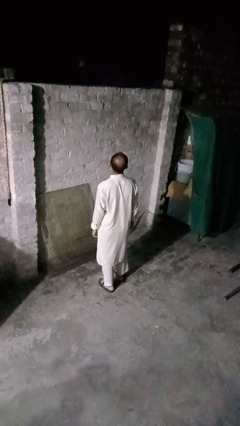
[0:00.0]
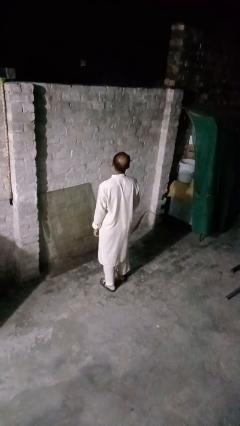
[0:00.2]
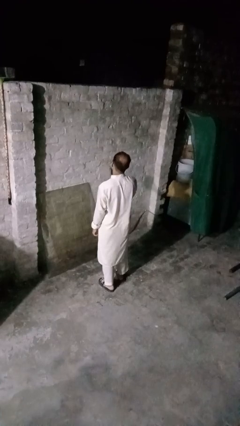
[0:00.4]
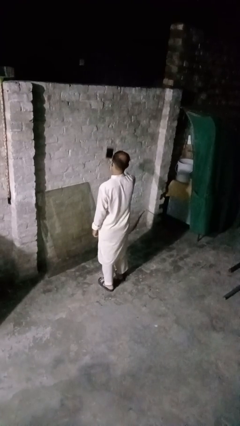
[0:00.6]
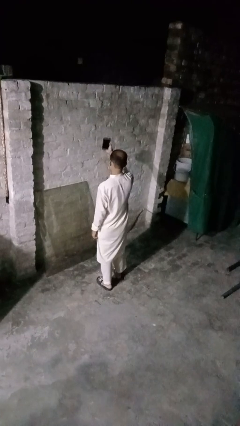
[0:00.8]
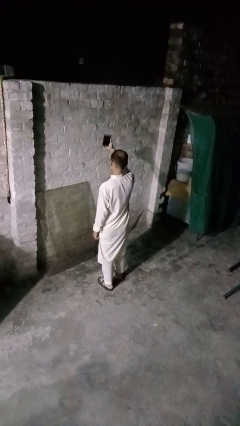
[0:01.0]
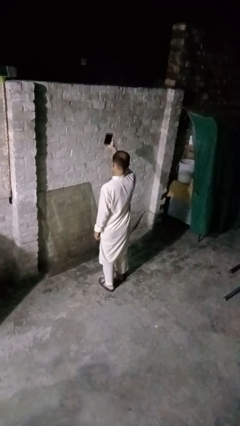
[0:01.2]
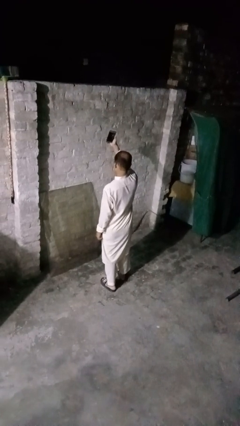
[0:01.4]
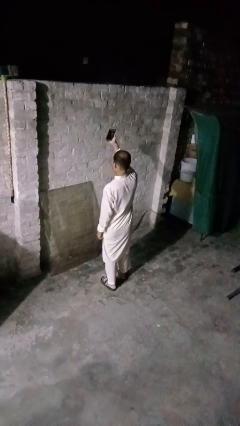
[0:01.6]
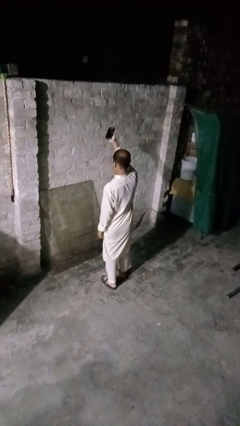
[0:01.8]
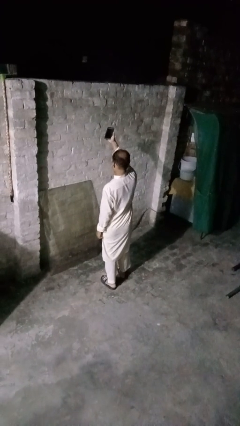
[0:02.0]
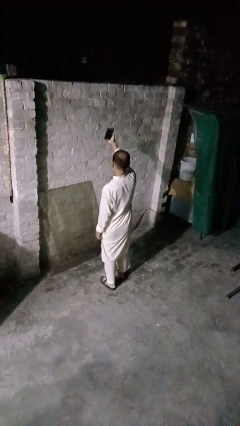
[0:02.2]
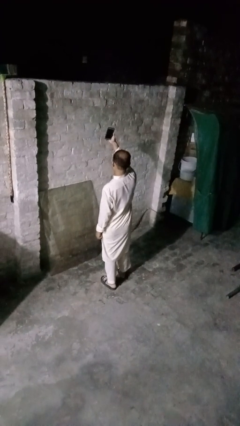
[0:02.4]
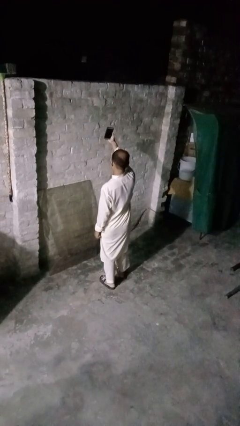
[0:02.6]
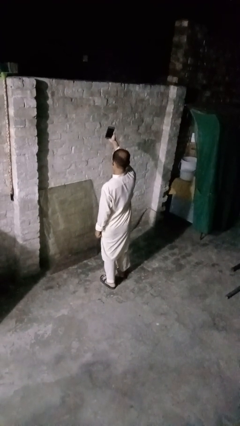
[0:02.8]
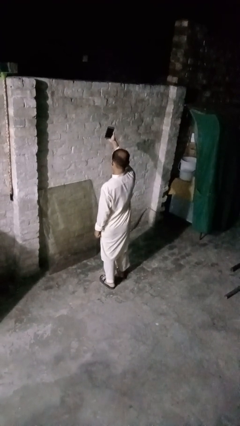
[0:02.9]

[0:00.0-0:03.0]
person takes selfie

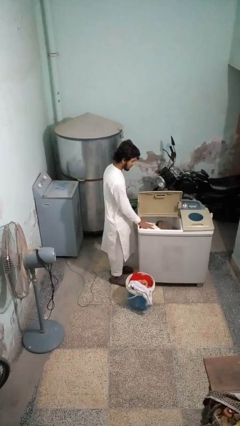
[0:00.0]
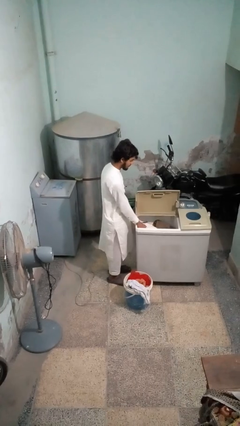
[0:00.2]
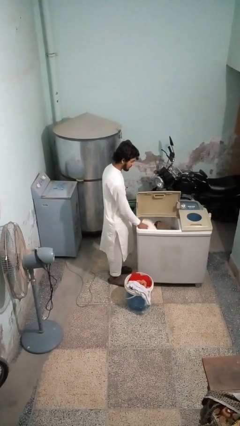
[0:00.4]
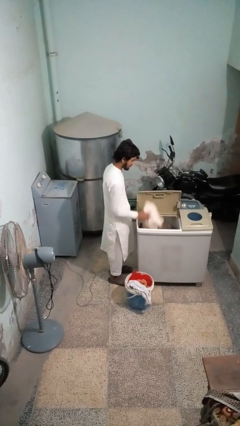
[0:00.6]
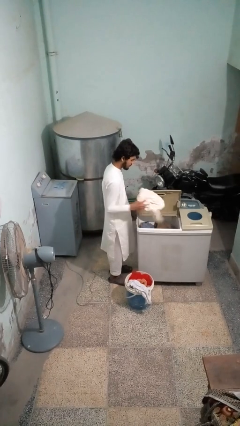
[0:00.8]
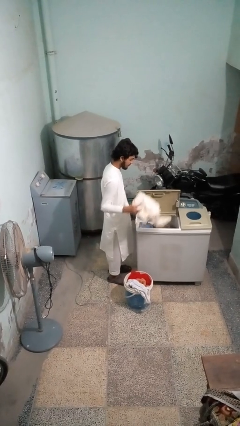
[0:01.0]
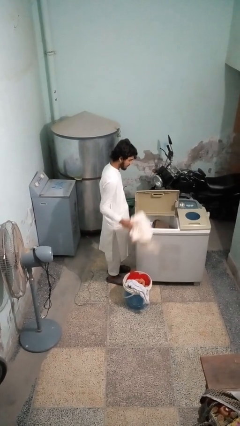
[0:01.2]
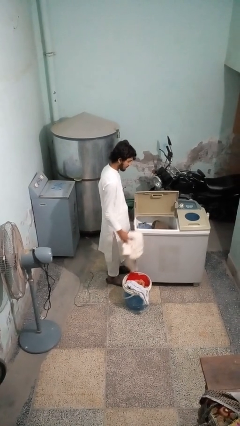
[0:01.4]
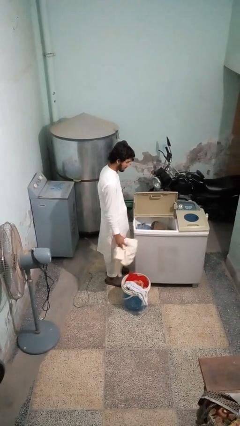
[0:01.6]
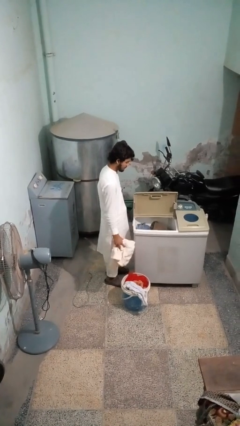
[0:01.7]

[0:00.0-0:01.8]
person unloads clotheswasher

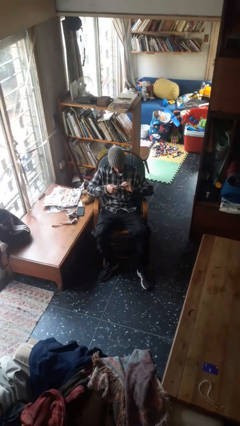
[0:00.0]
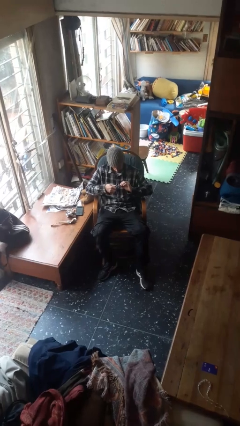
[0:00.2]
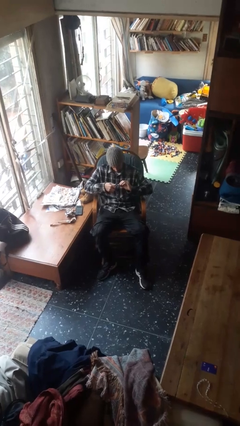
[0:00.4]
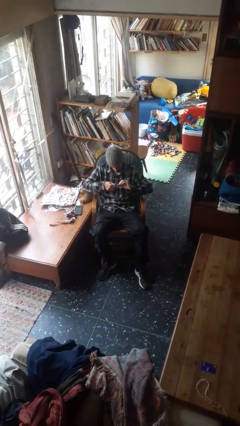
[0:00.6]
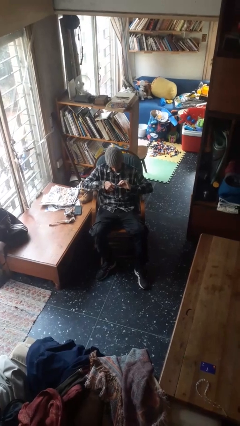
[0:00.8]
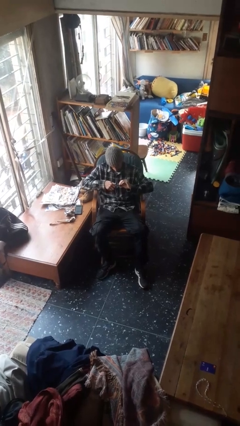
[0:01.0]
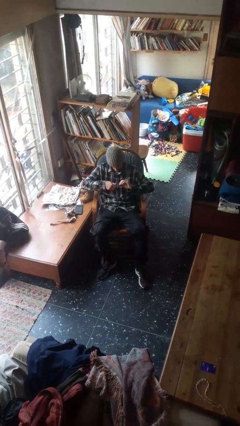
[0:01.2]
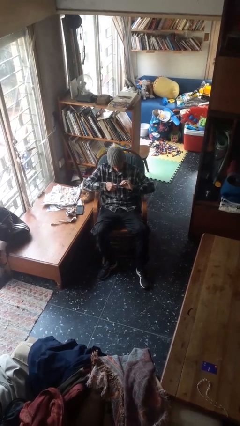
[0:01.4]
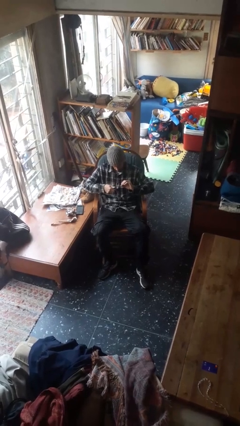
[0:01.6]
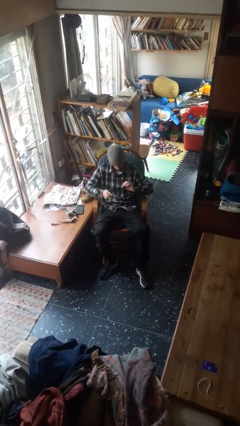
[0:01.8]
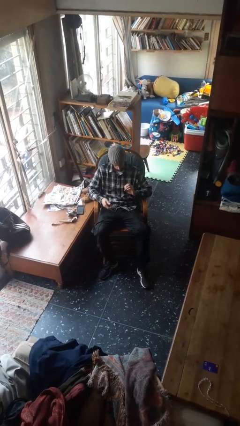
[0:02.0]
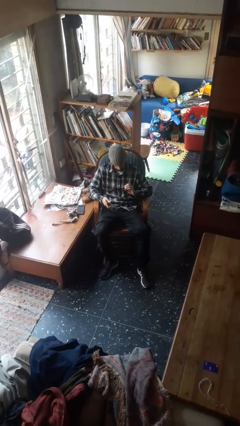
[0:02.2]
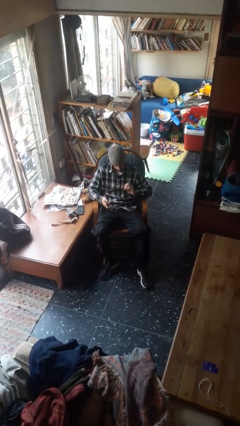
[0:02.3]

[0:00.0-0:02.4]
person clips fingernails

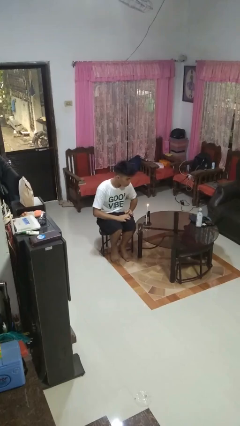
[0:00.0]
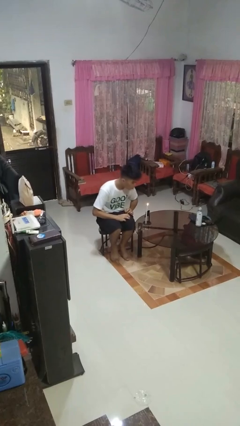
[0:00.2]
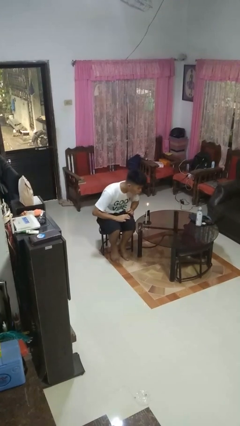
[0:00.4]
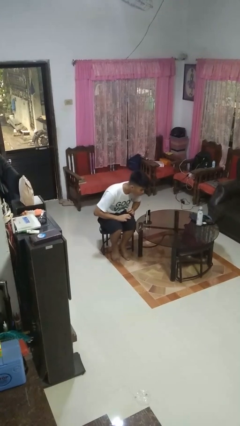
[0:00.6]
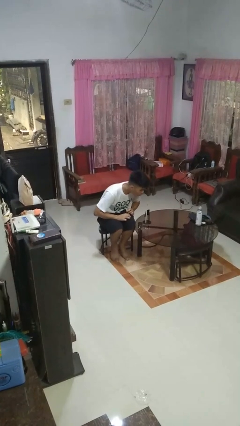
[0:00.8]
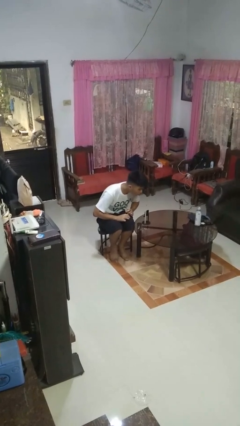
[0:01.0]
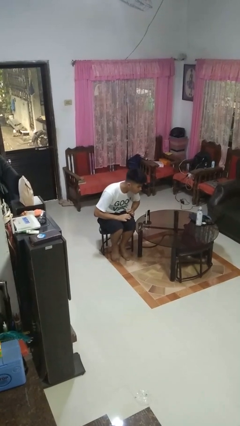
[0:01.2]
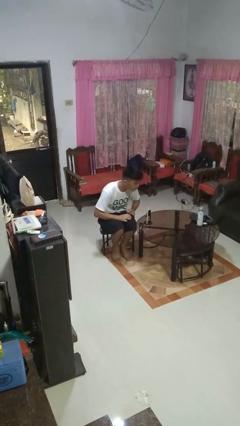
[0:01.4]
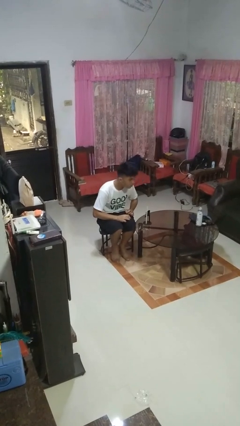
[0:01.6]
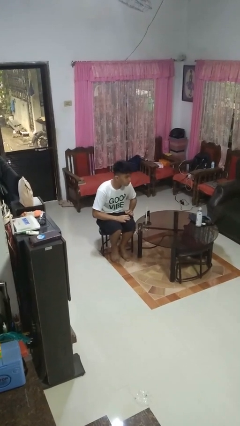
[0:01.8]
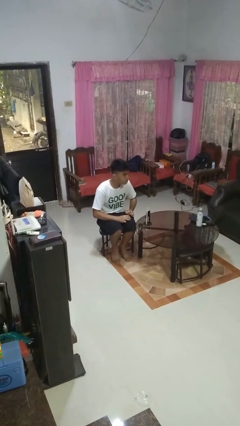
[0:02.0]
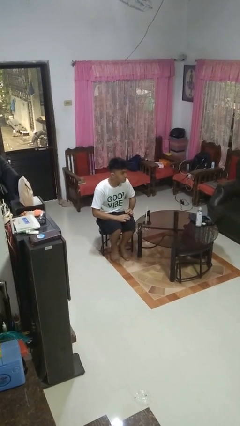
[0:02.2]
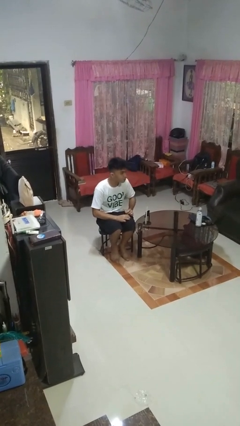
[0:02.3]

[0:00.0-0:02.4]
person extinguishes candle

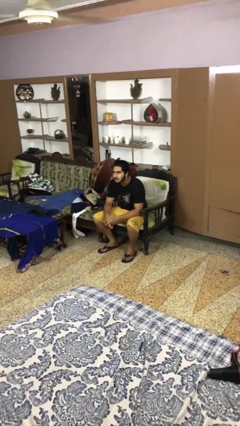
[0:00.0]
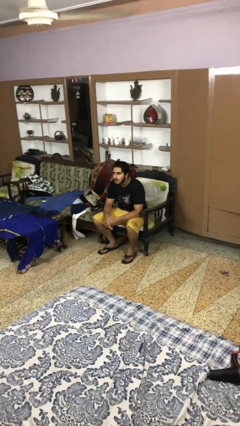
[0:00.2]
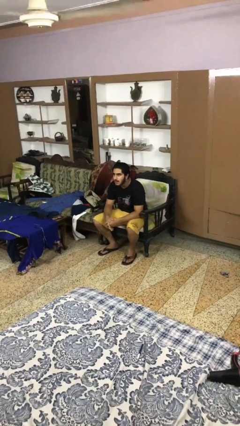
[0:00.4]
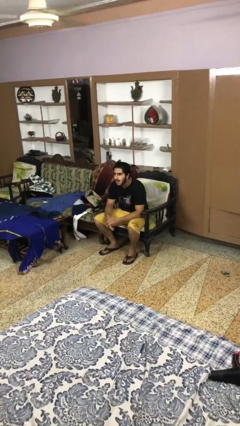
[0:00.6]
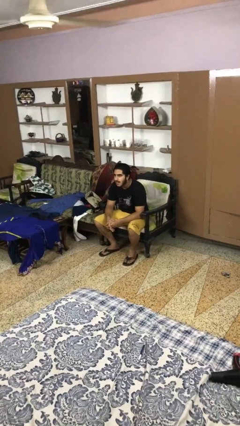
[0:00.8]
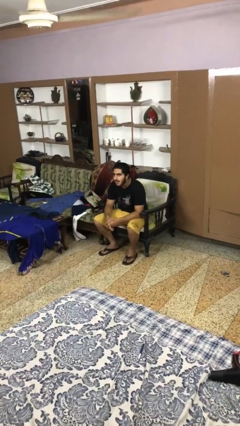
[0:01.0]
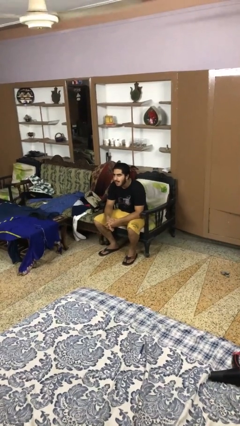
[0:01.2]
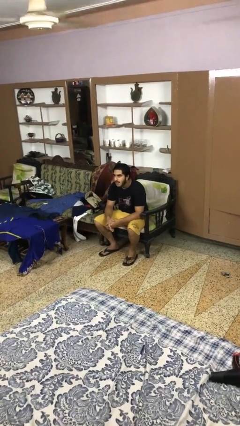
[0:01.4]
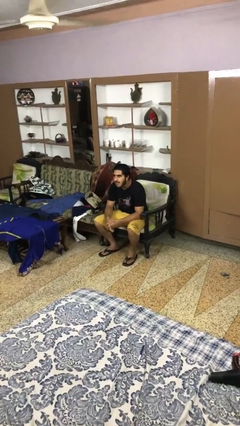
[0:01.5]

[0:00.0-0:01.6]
person sticks out tongue

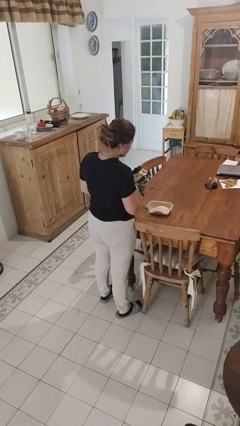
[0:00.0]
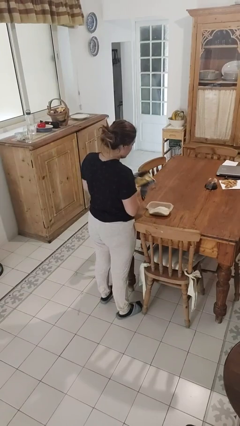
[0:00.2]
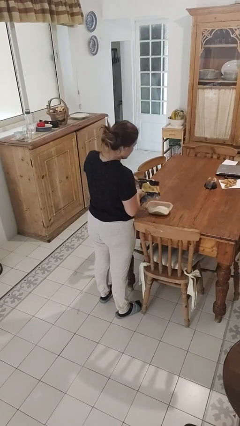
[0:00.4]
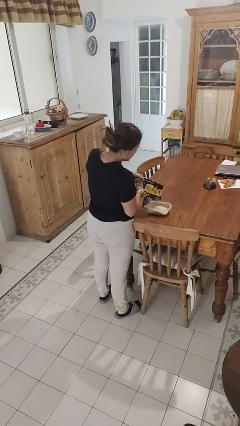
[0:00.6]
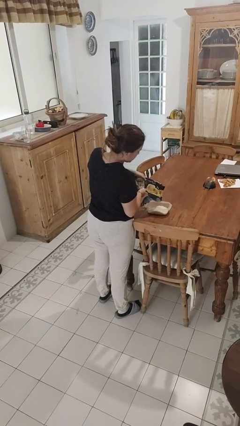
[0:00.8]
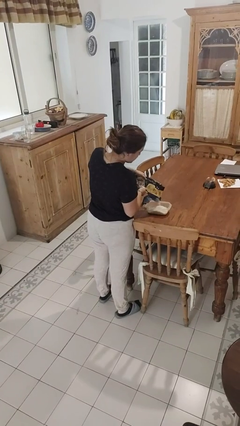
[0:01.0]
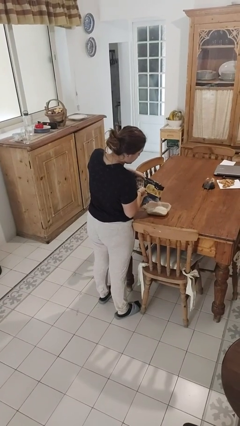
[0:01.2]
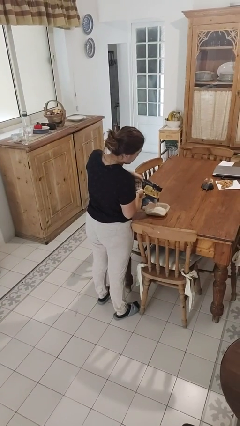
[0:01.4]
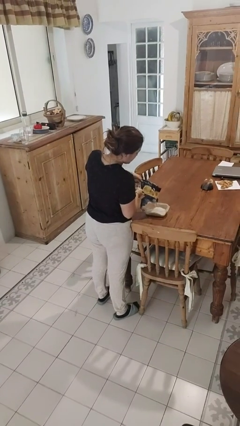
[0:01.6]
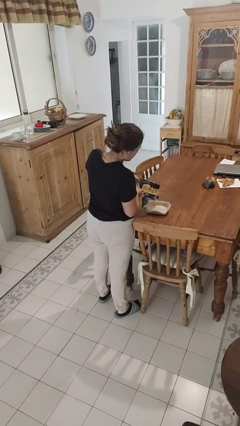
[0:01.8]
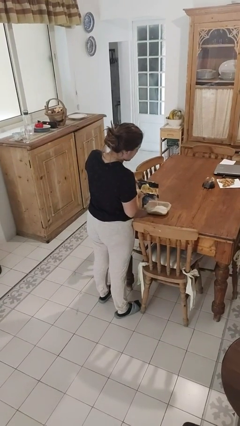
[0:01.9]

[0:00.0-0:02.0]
person pours into bowl

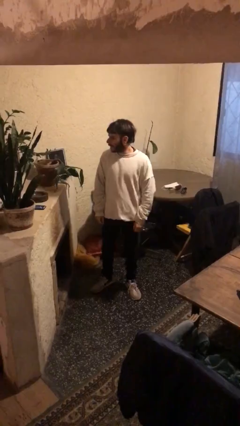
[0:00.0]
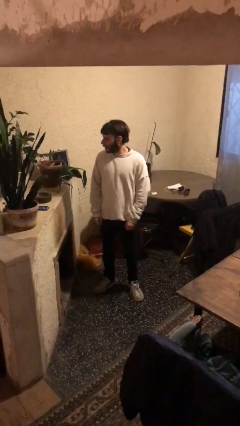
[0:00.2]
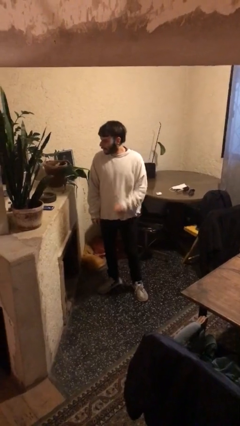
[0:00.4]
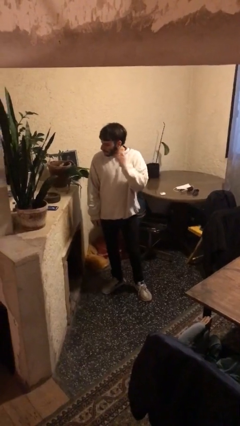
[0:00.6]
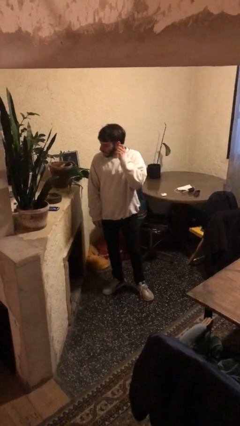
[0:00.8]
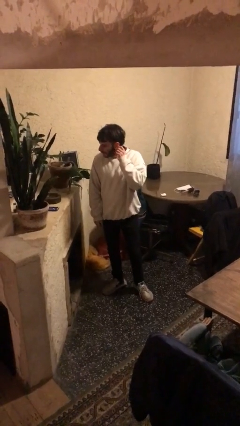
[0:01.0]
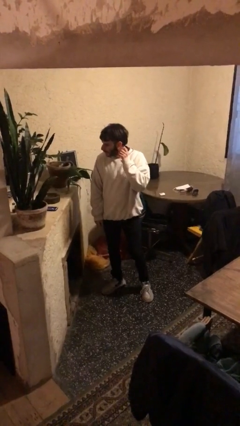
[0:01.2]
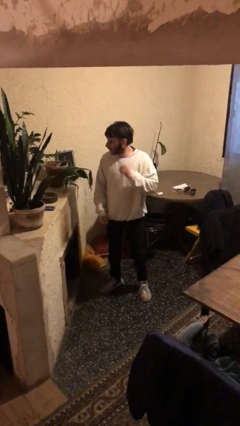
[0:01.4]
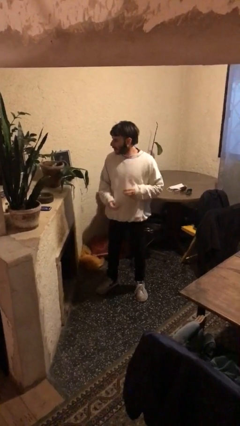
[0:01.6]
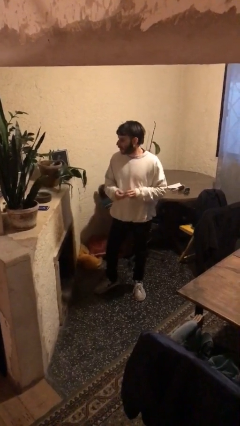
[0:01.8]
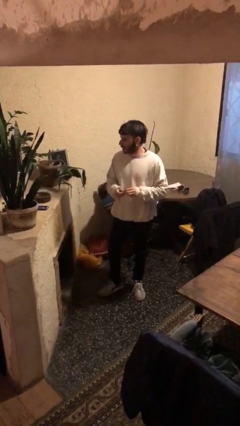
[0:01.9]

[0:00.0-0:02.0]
person takes off earrings

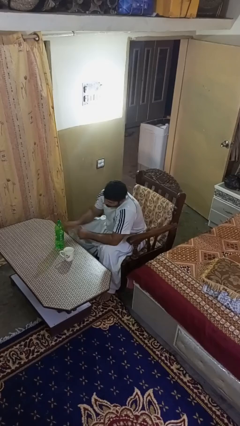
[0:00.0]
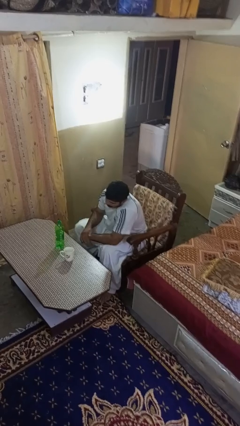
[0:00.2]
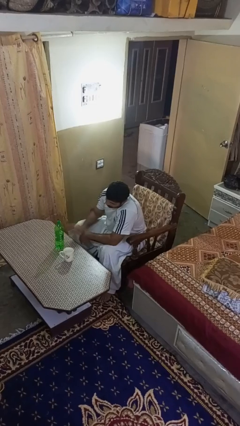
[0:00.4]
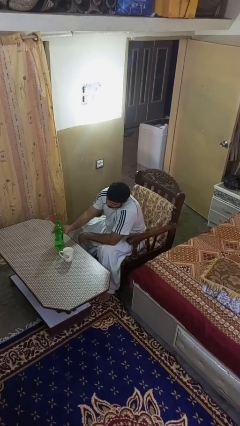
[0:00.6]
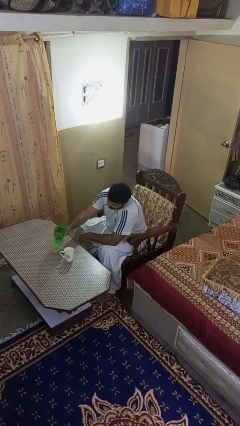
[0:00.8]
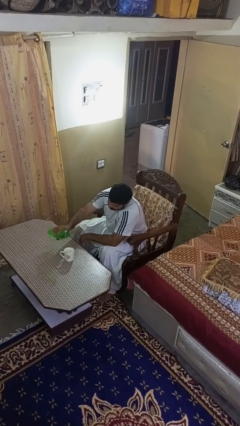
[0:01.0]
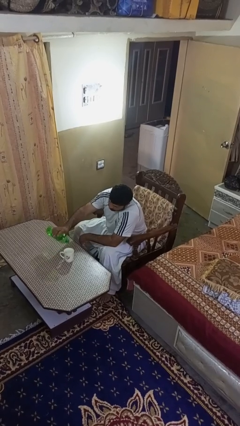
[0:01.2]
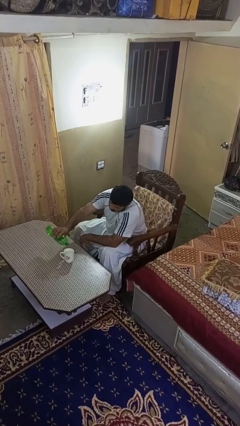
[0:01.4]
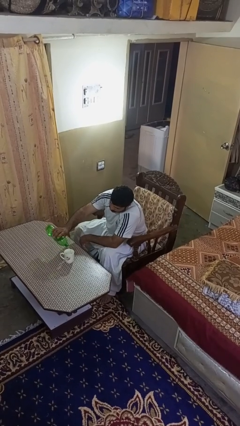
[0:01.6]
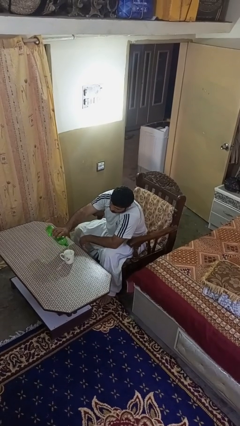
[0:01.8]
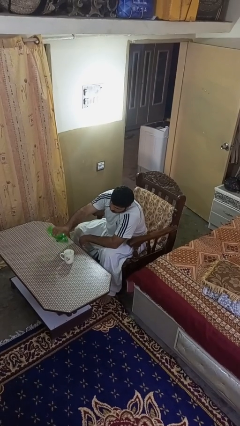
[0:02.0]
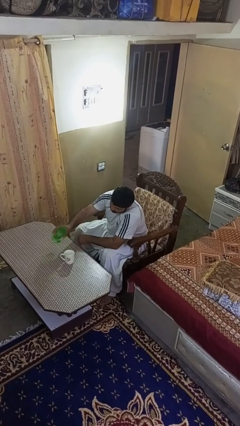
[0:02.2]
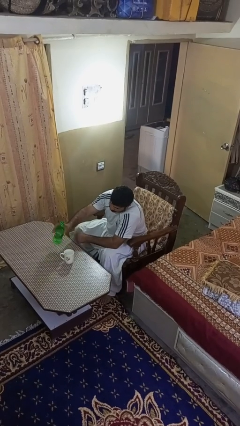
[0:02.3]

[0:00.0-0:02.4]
person pours liquid into cup
